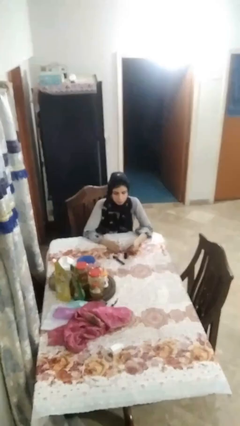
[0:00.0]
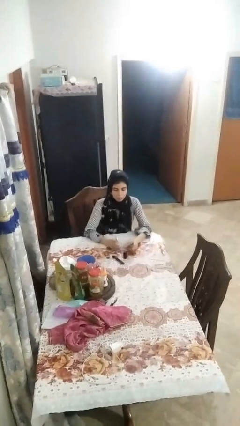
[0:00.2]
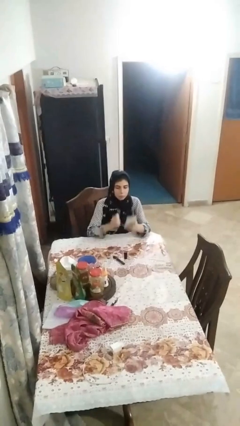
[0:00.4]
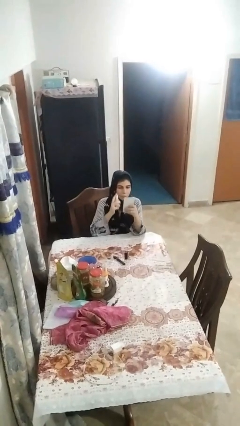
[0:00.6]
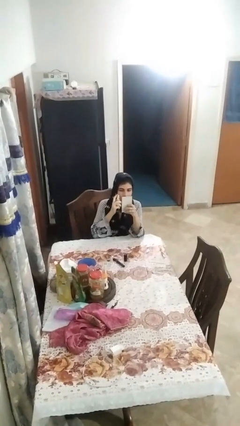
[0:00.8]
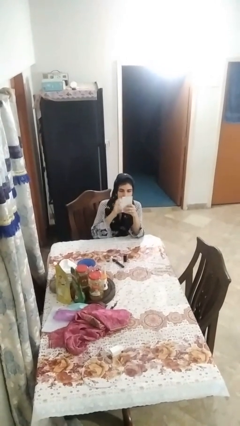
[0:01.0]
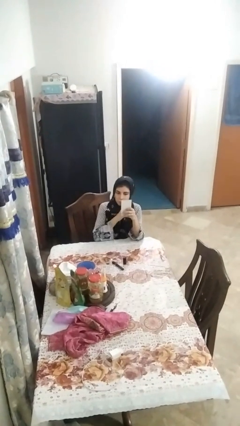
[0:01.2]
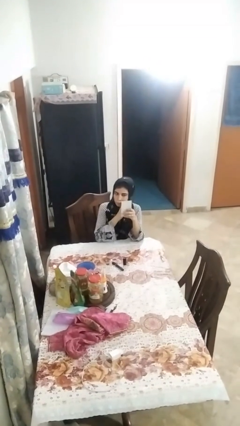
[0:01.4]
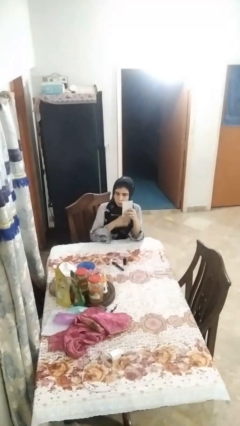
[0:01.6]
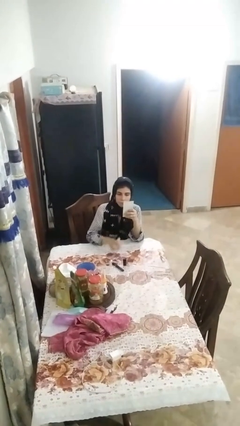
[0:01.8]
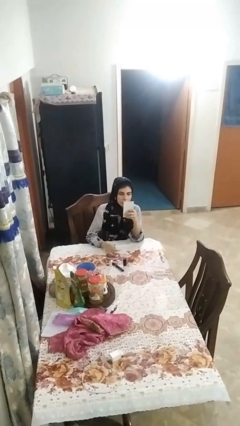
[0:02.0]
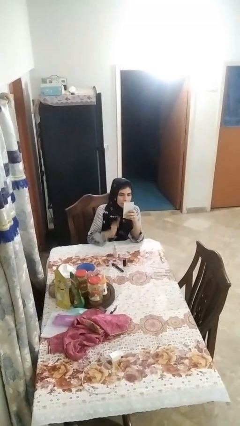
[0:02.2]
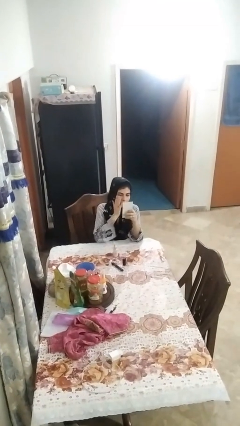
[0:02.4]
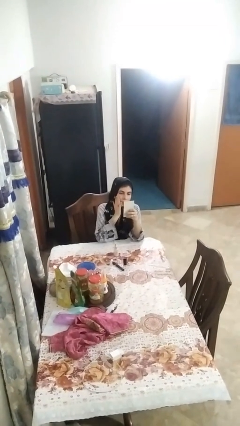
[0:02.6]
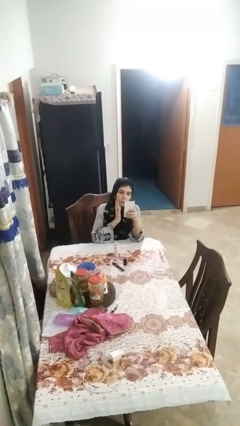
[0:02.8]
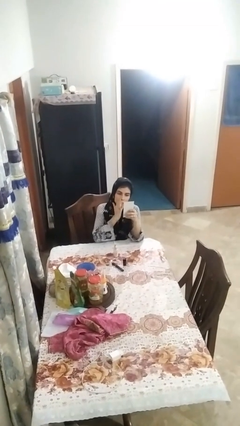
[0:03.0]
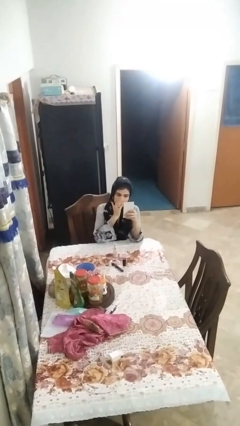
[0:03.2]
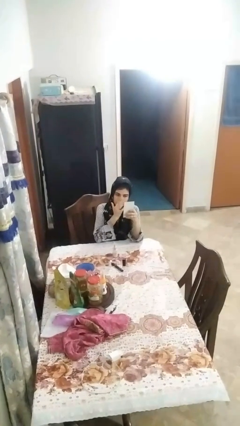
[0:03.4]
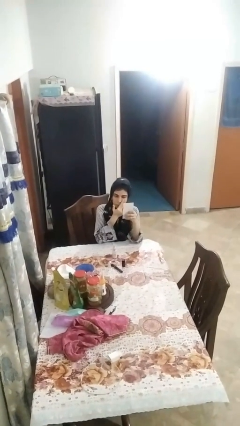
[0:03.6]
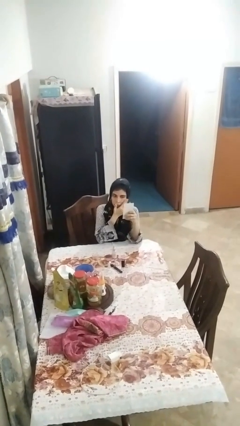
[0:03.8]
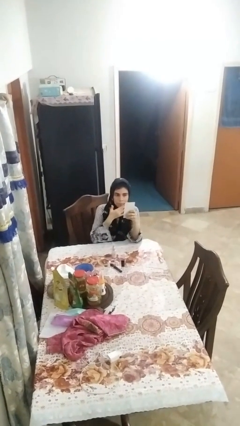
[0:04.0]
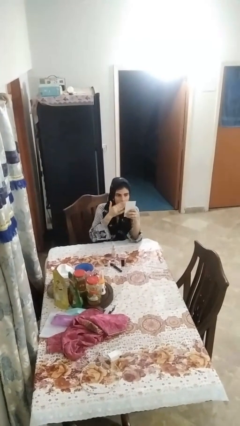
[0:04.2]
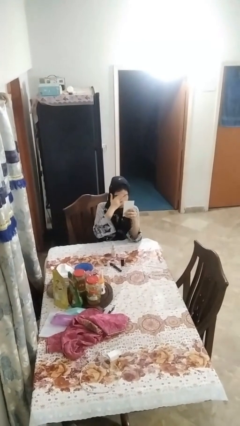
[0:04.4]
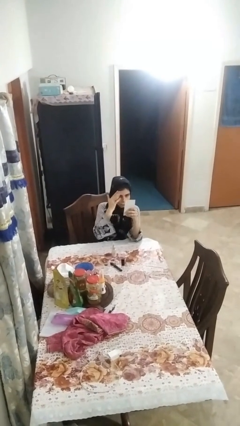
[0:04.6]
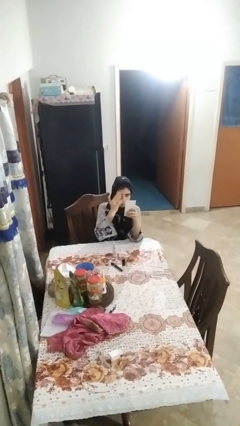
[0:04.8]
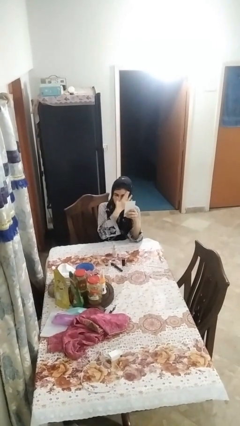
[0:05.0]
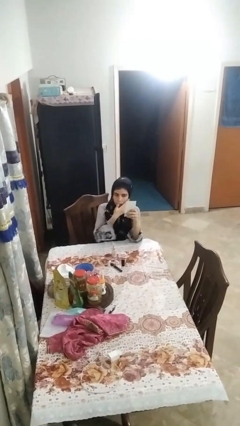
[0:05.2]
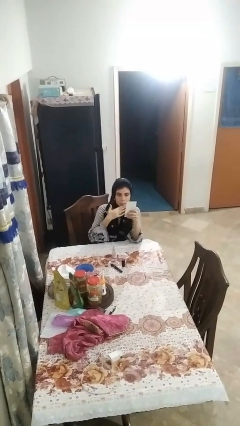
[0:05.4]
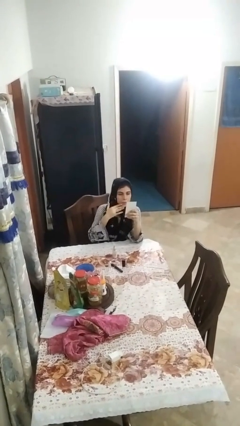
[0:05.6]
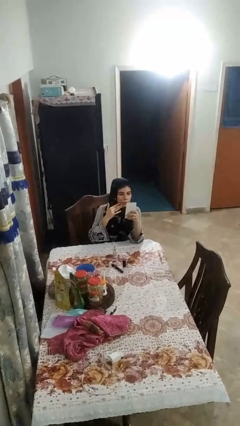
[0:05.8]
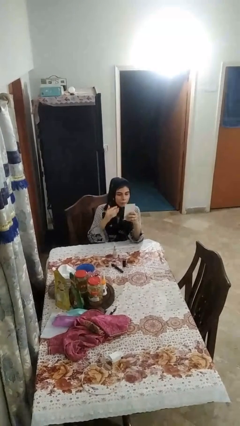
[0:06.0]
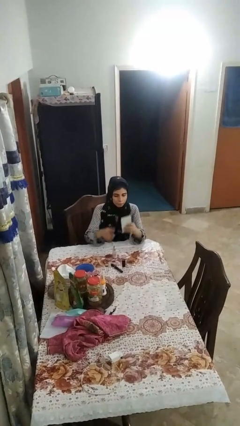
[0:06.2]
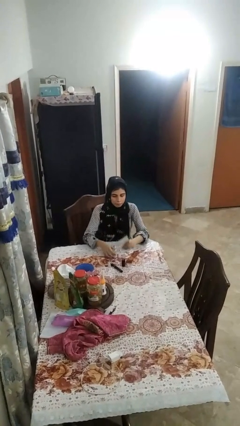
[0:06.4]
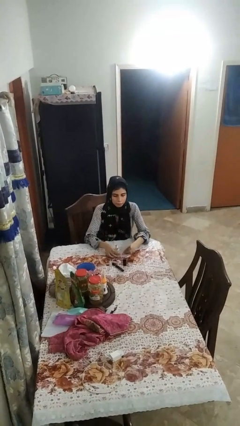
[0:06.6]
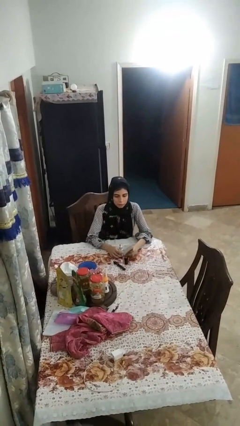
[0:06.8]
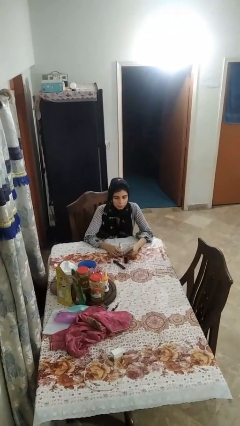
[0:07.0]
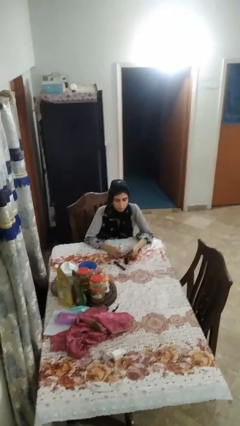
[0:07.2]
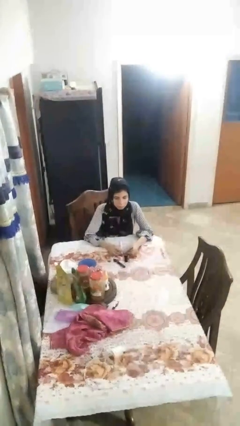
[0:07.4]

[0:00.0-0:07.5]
person applies foundation makeup

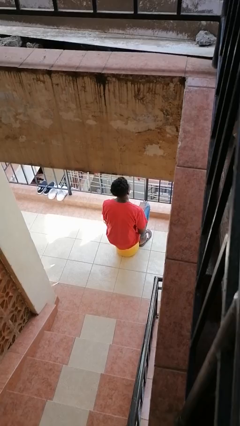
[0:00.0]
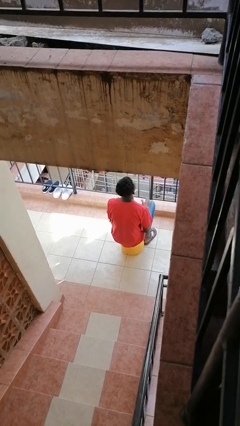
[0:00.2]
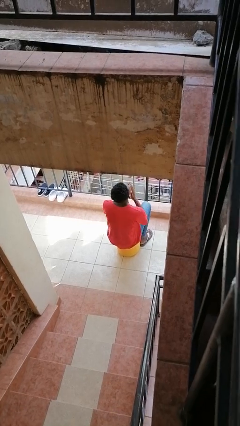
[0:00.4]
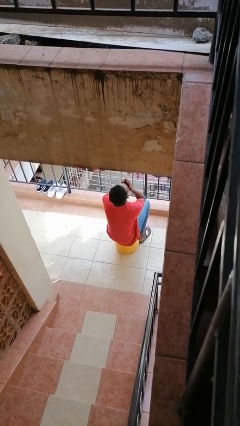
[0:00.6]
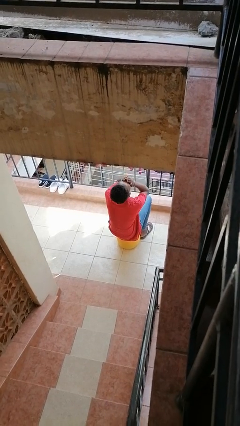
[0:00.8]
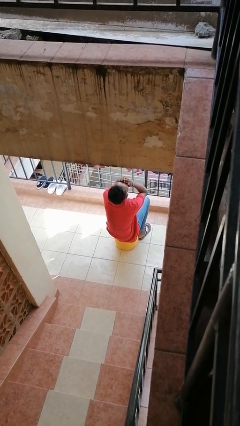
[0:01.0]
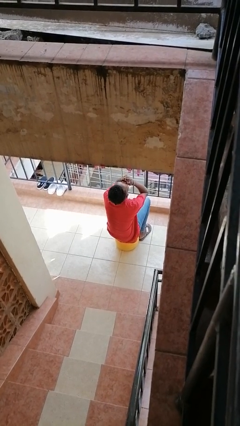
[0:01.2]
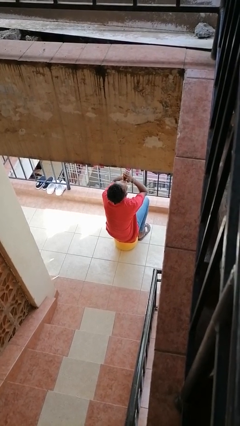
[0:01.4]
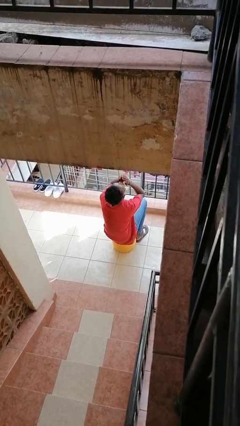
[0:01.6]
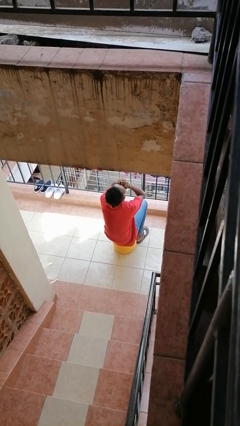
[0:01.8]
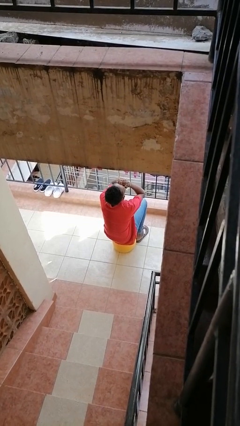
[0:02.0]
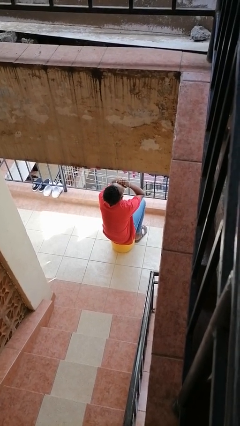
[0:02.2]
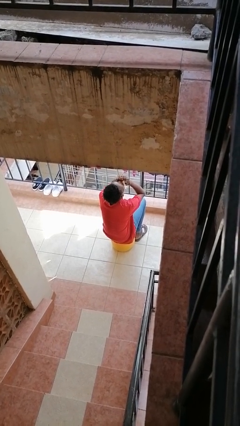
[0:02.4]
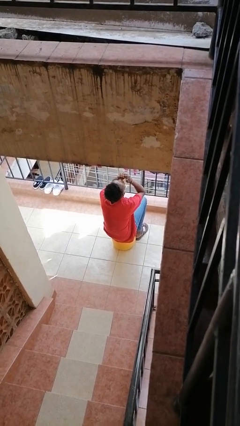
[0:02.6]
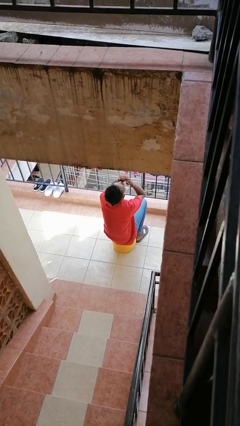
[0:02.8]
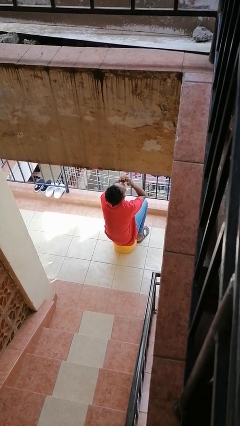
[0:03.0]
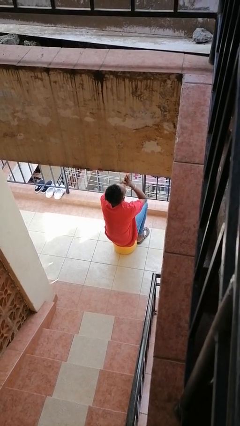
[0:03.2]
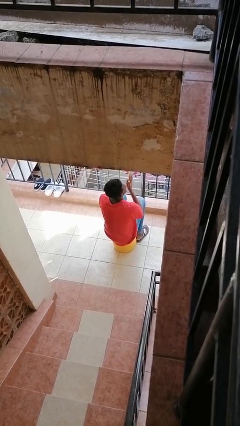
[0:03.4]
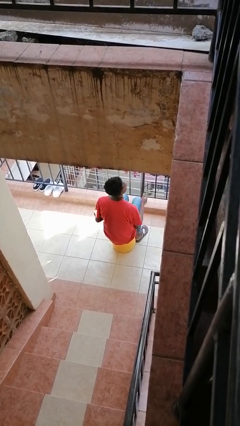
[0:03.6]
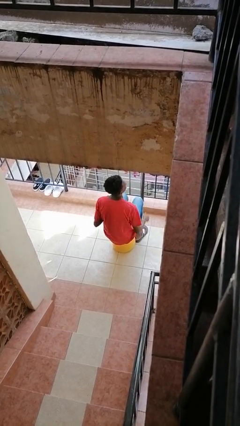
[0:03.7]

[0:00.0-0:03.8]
person blows into hands

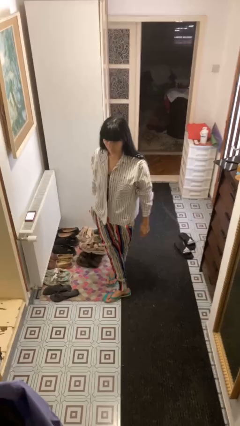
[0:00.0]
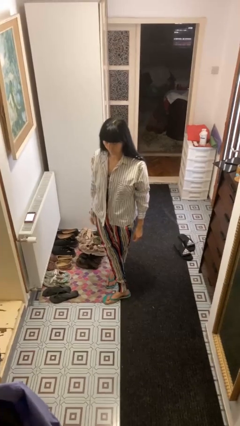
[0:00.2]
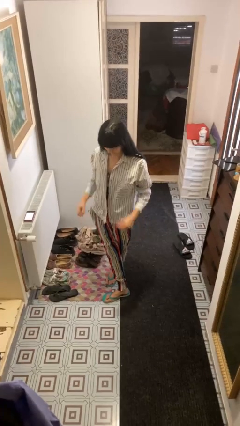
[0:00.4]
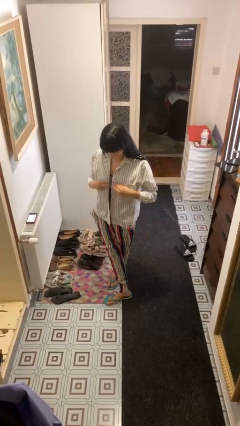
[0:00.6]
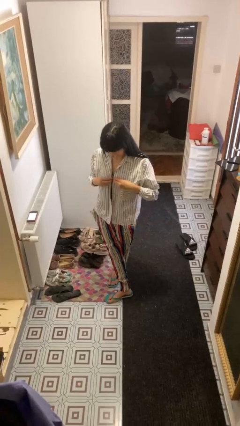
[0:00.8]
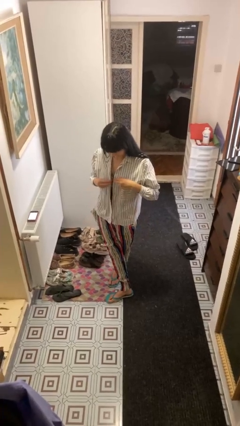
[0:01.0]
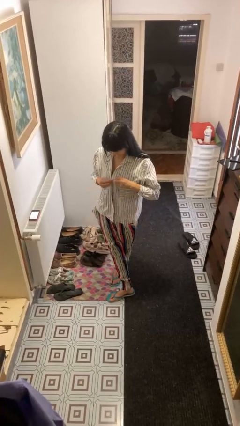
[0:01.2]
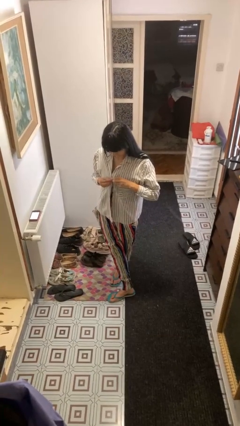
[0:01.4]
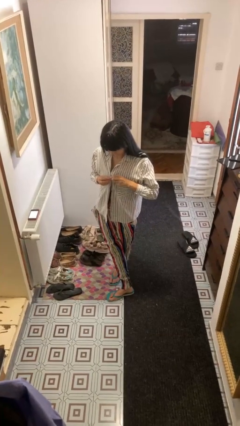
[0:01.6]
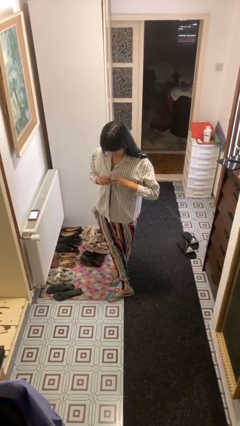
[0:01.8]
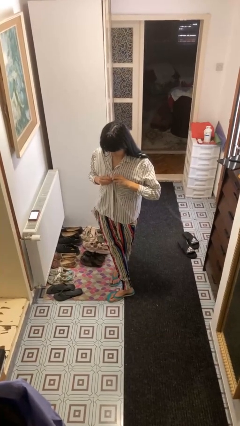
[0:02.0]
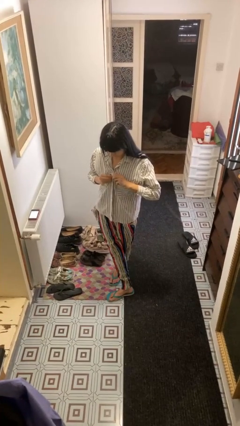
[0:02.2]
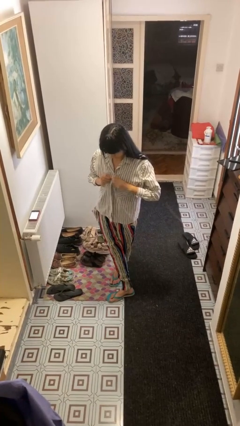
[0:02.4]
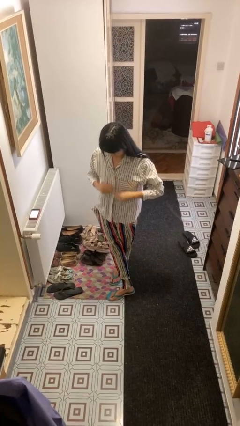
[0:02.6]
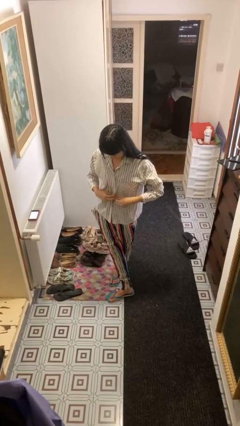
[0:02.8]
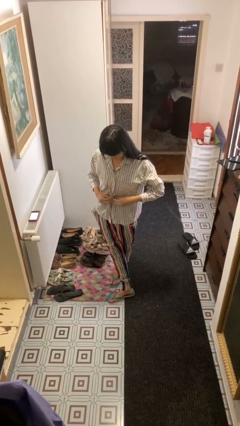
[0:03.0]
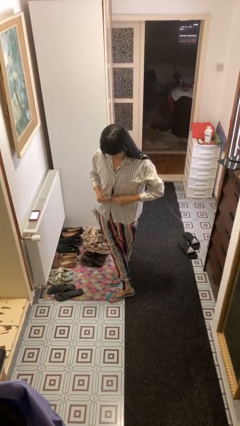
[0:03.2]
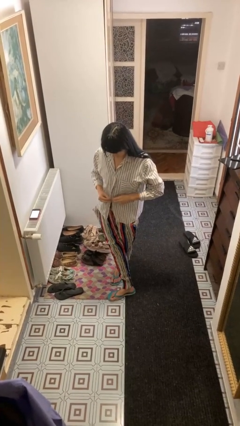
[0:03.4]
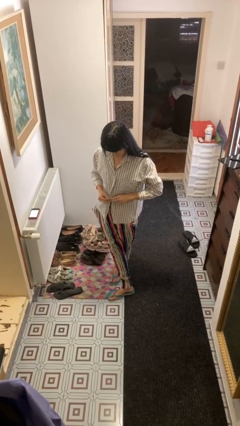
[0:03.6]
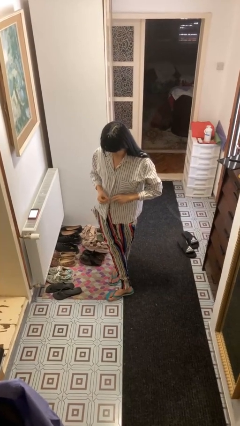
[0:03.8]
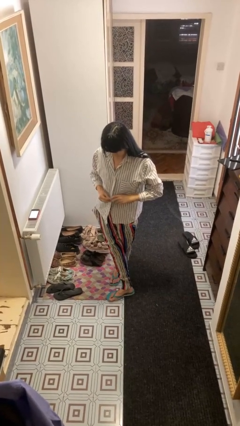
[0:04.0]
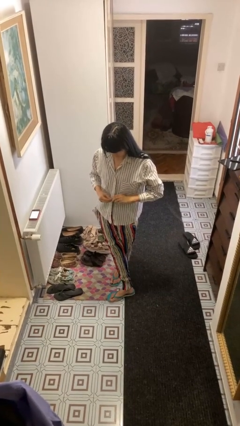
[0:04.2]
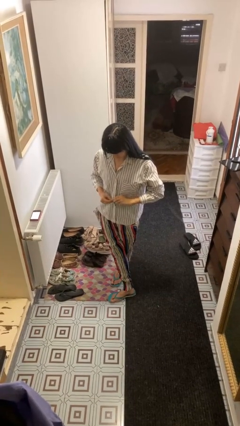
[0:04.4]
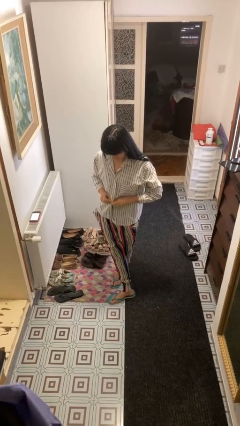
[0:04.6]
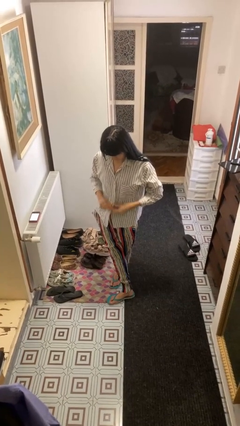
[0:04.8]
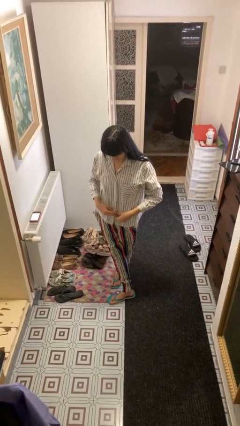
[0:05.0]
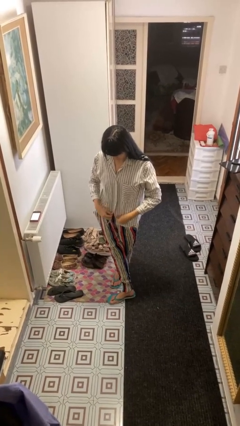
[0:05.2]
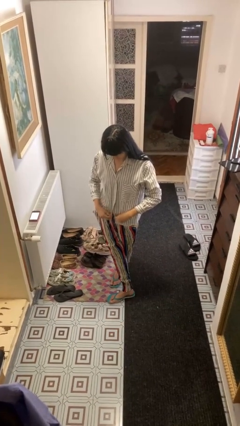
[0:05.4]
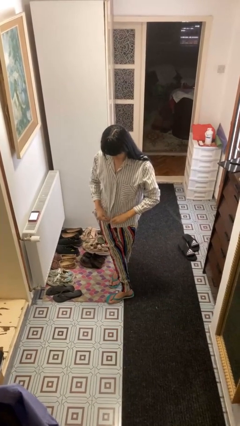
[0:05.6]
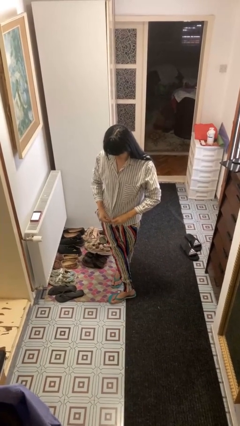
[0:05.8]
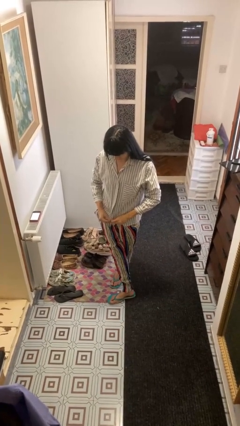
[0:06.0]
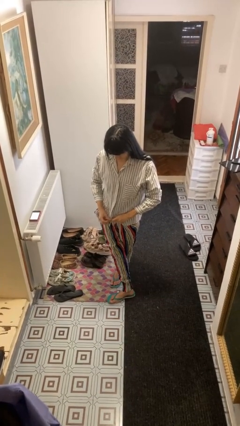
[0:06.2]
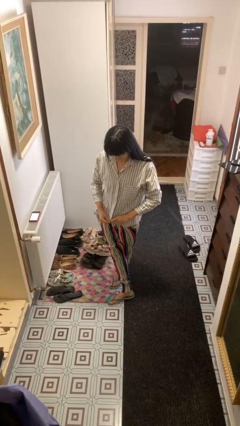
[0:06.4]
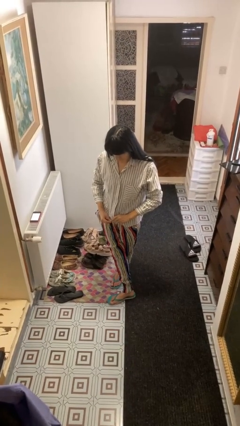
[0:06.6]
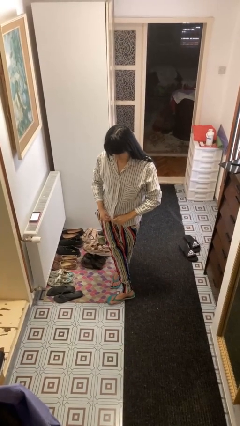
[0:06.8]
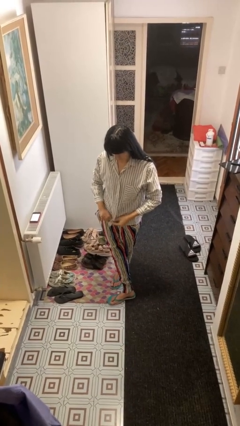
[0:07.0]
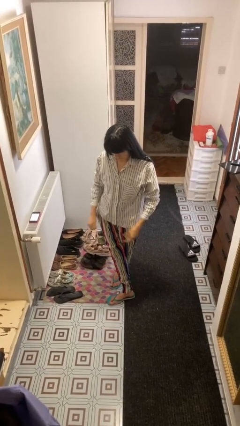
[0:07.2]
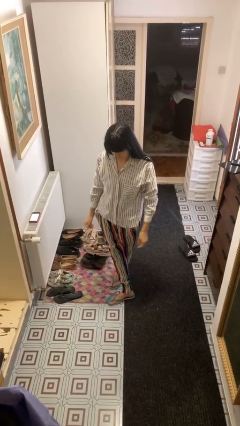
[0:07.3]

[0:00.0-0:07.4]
person buttons shirt
